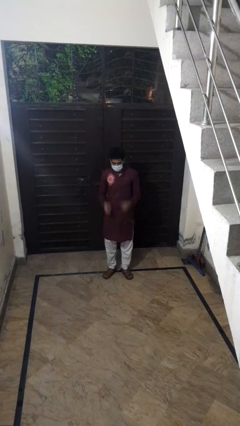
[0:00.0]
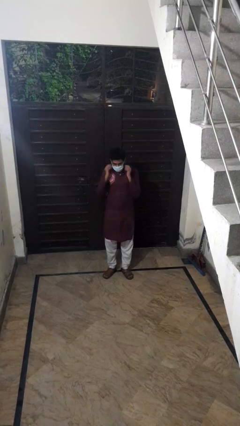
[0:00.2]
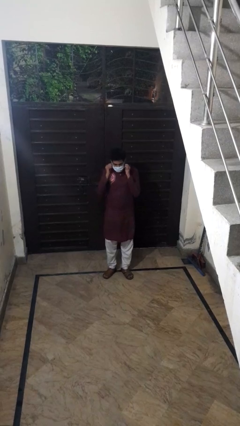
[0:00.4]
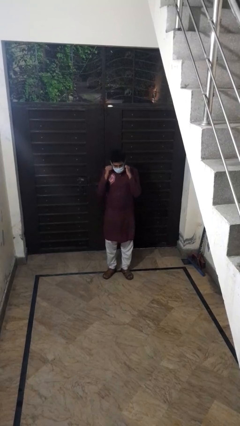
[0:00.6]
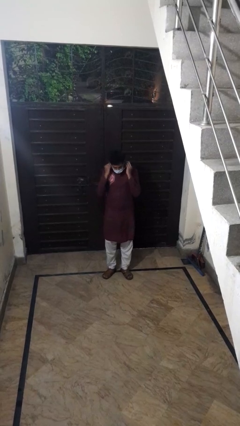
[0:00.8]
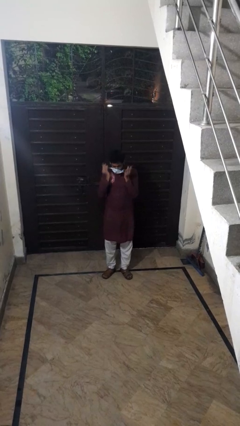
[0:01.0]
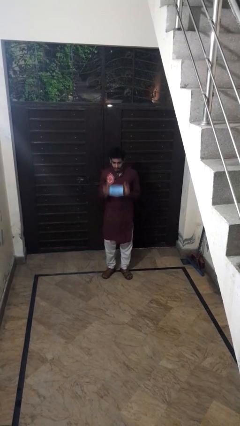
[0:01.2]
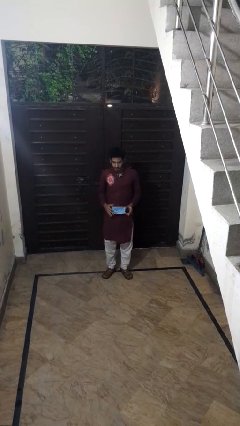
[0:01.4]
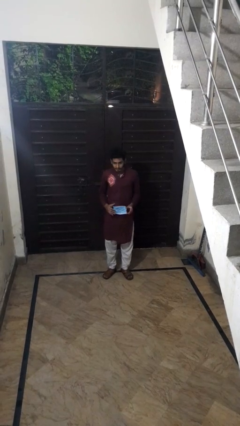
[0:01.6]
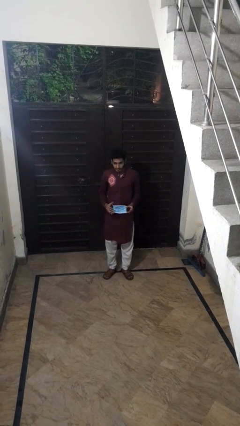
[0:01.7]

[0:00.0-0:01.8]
person takes off facemask

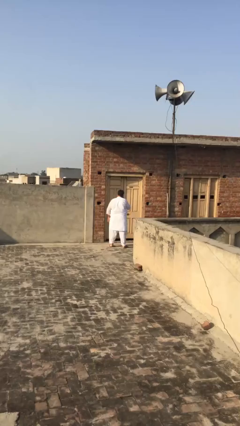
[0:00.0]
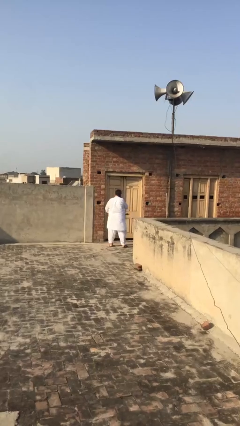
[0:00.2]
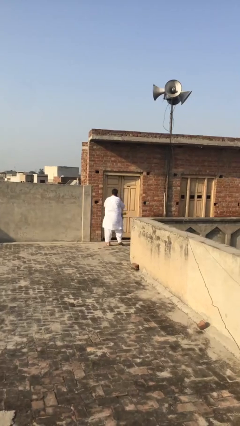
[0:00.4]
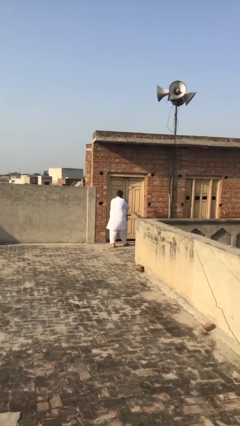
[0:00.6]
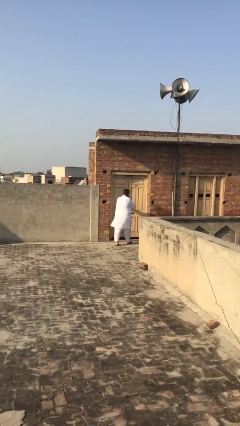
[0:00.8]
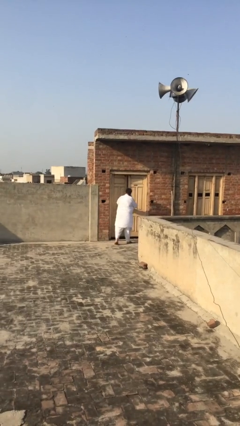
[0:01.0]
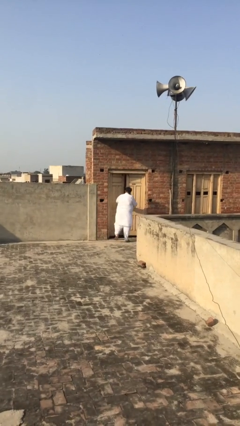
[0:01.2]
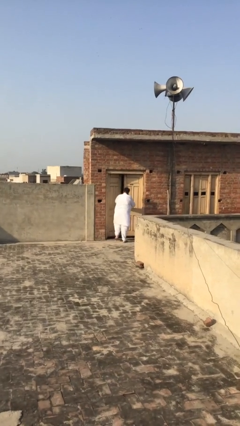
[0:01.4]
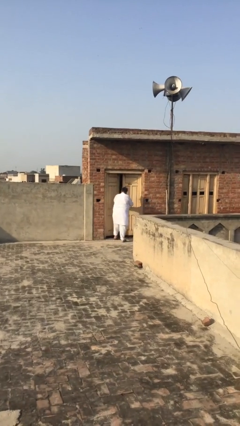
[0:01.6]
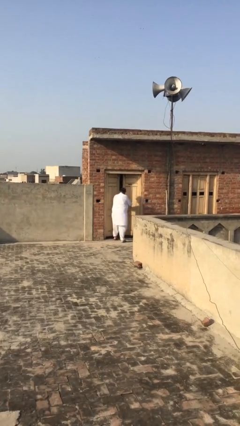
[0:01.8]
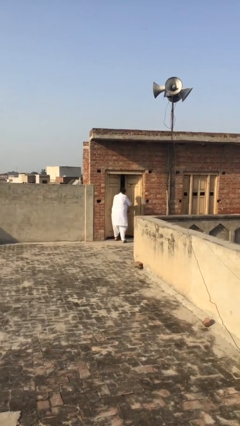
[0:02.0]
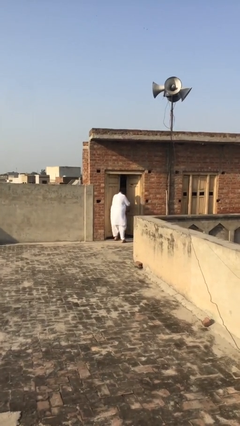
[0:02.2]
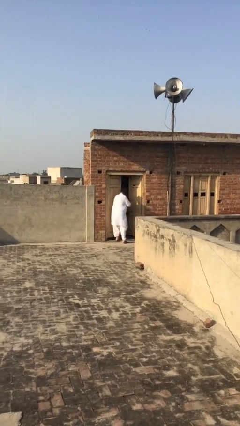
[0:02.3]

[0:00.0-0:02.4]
person opens facility door

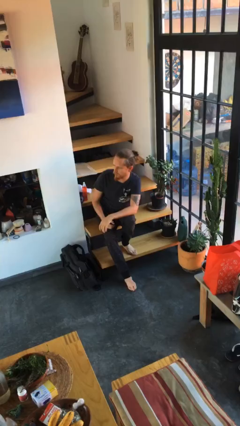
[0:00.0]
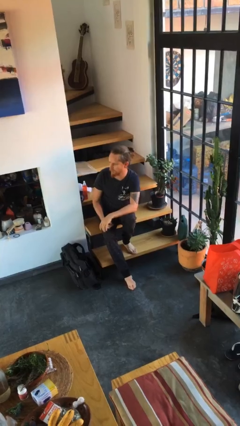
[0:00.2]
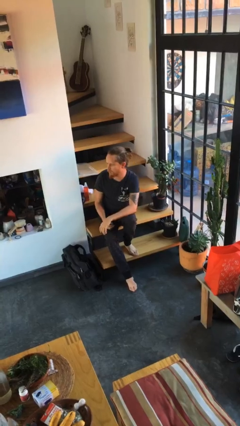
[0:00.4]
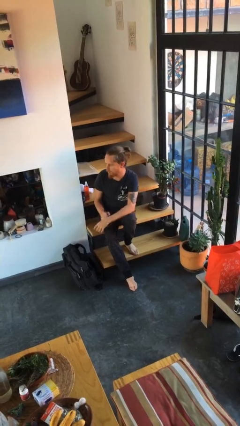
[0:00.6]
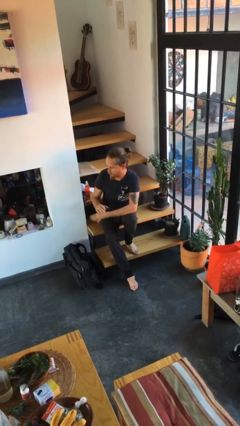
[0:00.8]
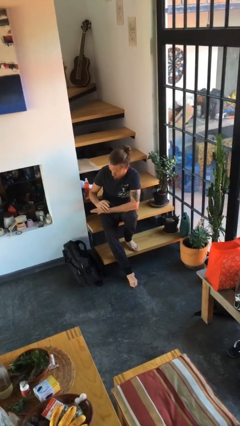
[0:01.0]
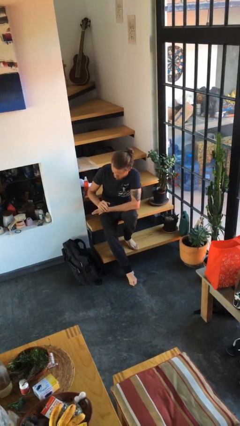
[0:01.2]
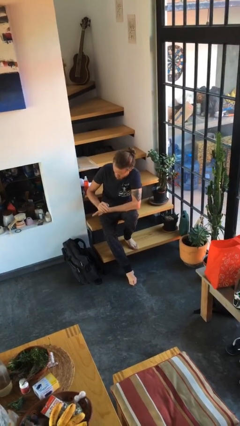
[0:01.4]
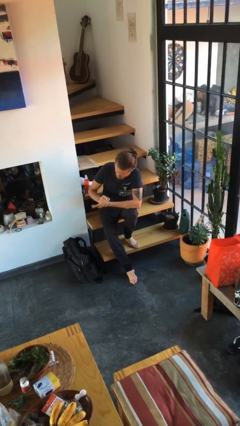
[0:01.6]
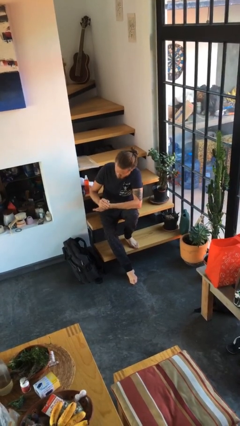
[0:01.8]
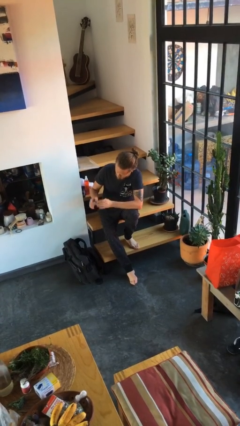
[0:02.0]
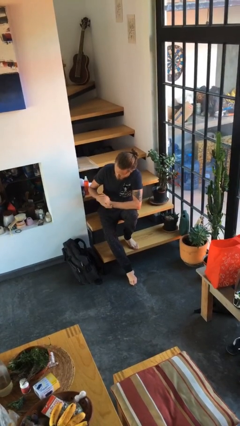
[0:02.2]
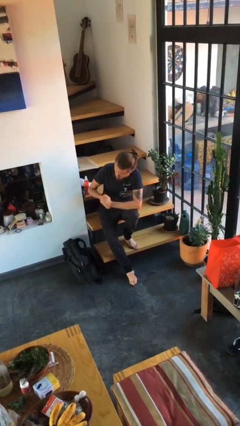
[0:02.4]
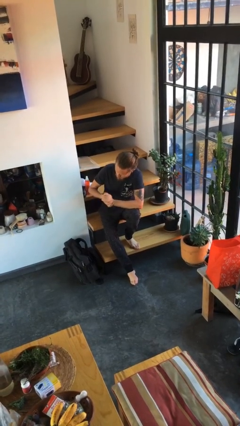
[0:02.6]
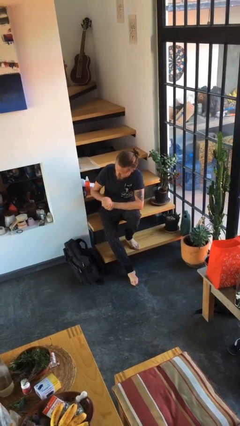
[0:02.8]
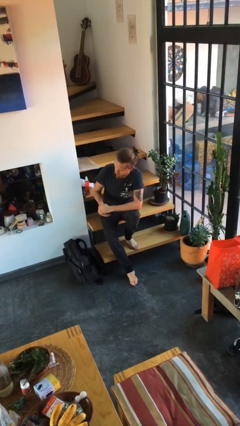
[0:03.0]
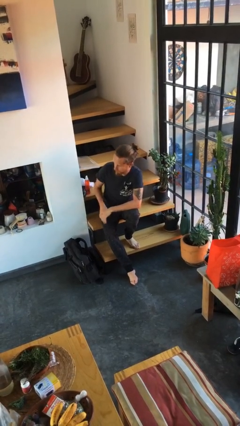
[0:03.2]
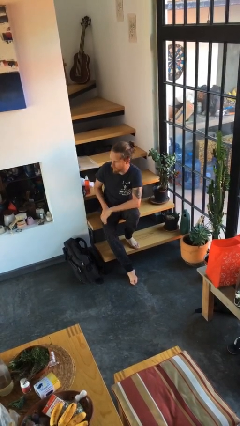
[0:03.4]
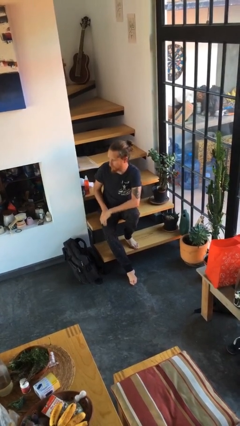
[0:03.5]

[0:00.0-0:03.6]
person cracks knuckles

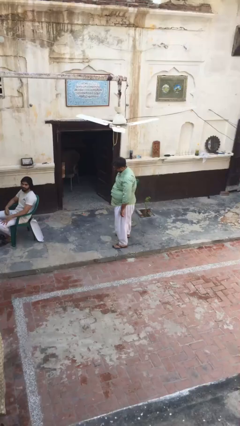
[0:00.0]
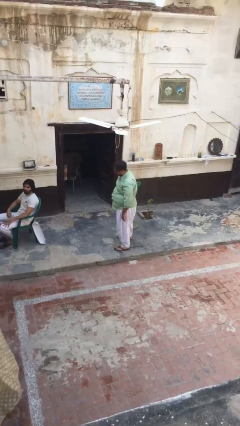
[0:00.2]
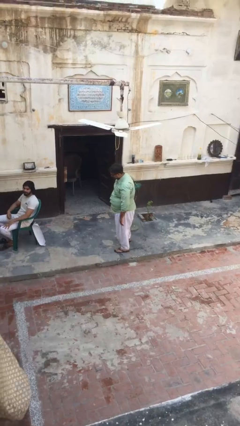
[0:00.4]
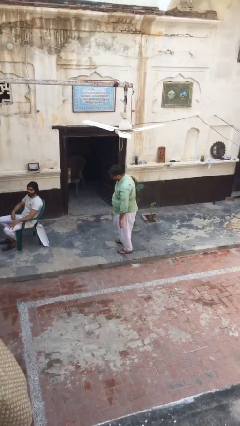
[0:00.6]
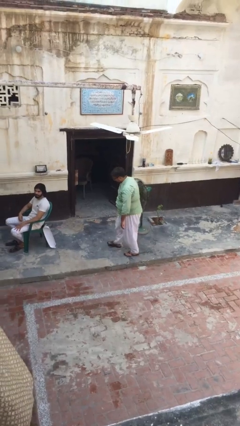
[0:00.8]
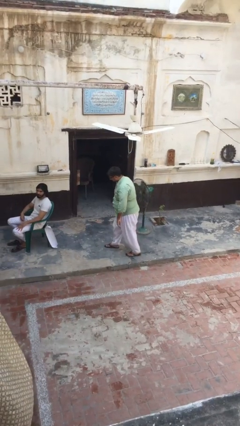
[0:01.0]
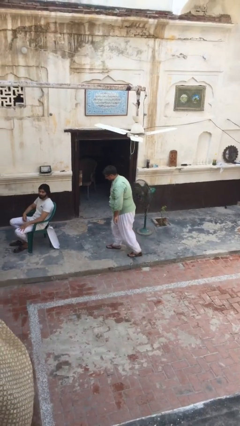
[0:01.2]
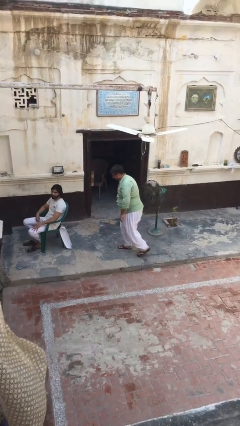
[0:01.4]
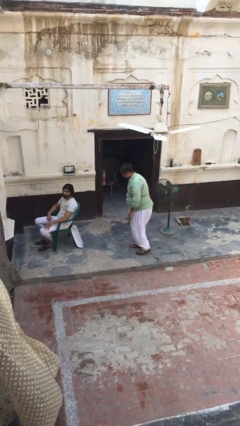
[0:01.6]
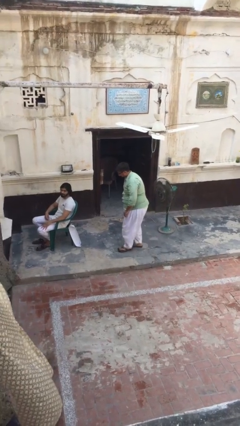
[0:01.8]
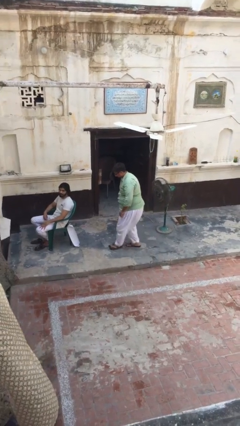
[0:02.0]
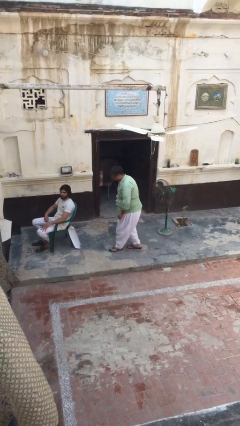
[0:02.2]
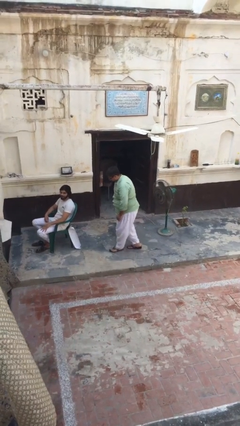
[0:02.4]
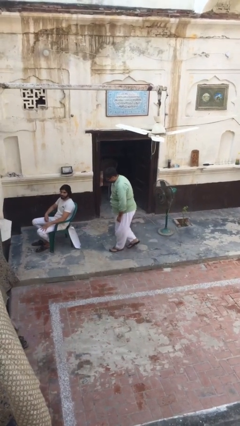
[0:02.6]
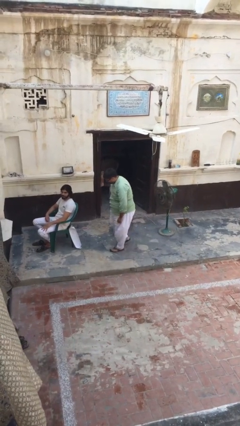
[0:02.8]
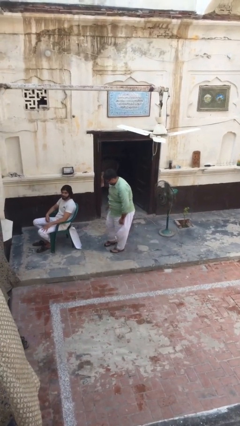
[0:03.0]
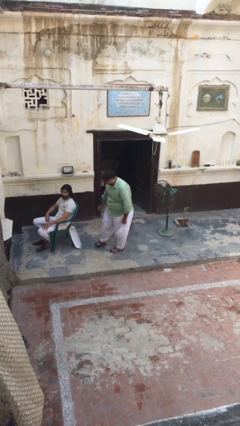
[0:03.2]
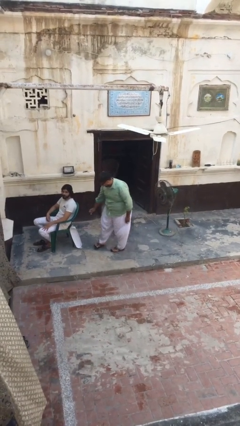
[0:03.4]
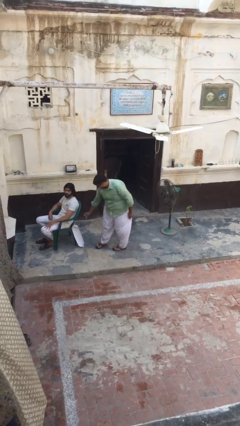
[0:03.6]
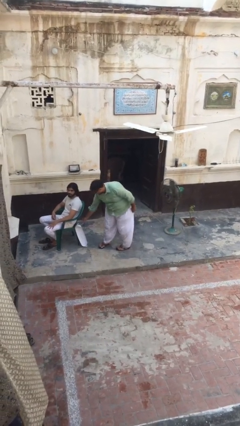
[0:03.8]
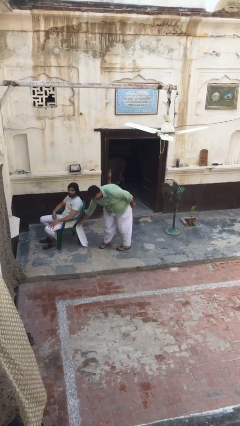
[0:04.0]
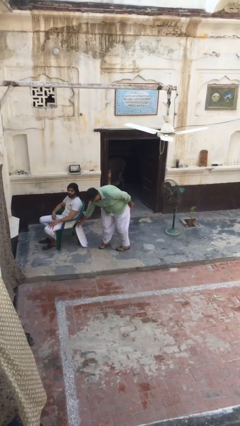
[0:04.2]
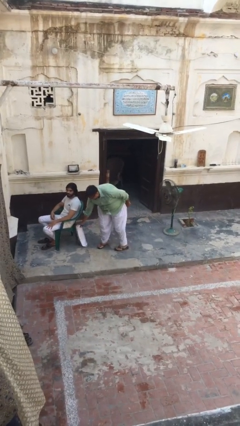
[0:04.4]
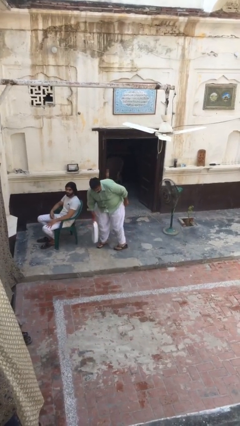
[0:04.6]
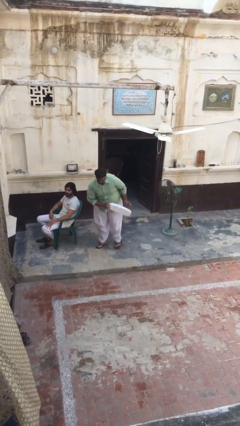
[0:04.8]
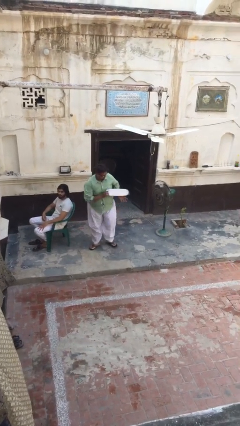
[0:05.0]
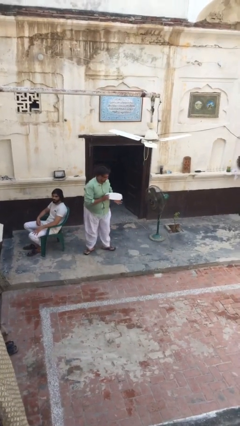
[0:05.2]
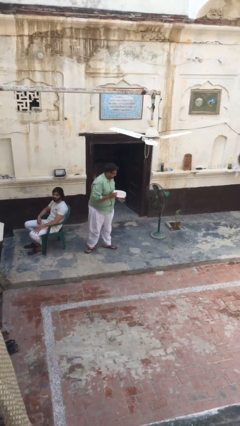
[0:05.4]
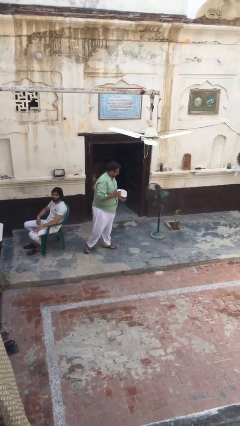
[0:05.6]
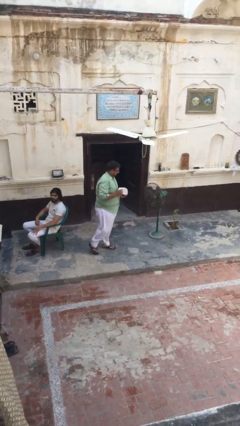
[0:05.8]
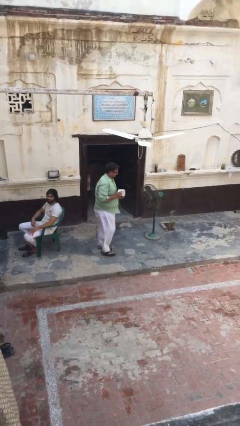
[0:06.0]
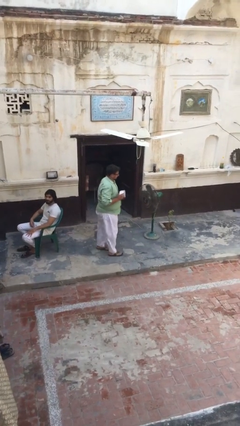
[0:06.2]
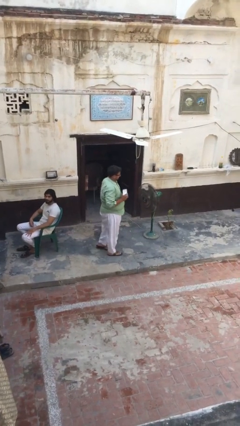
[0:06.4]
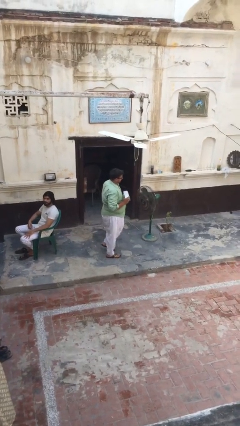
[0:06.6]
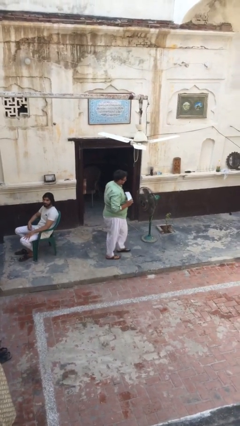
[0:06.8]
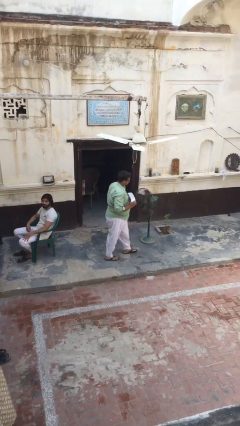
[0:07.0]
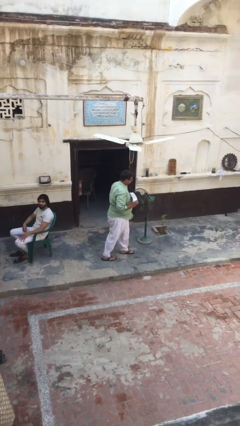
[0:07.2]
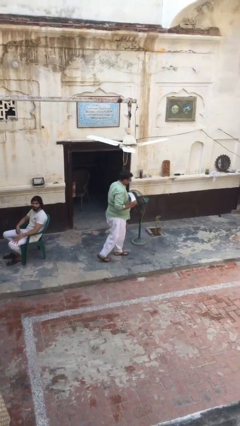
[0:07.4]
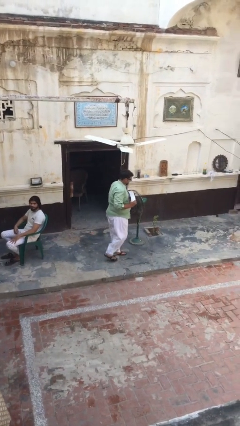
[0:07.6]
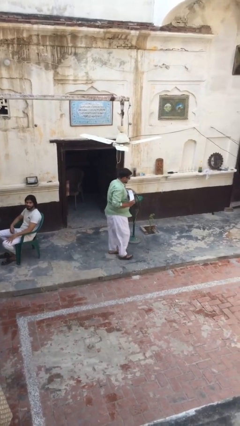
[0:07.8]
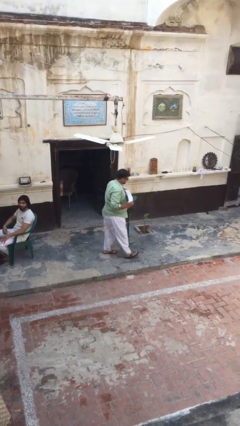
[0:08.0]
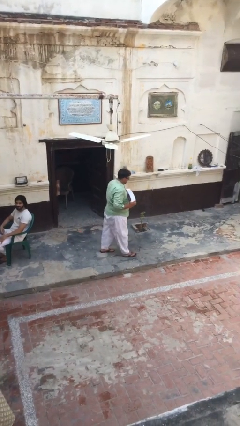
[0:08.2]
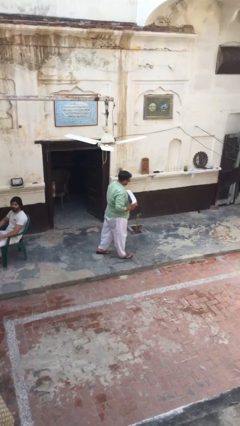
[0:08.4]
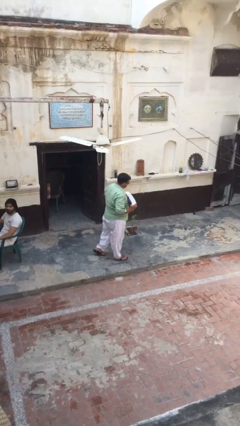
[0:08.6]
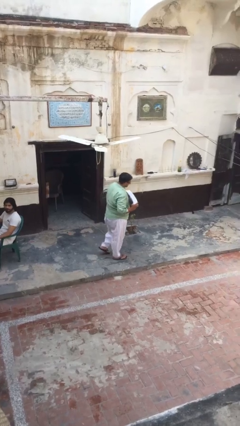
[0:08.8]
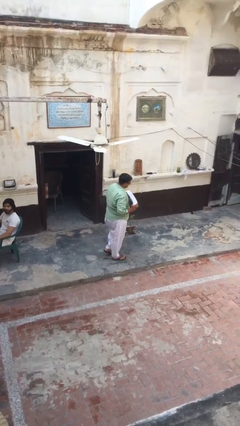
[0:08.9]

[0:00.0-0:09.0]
person steals object from person

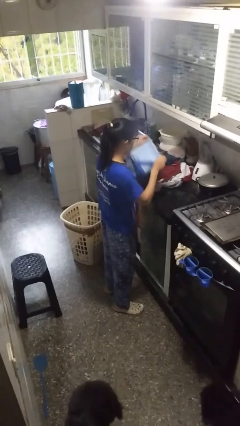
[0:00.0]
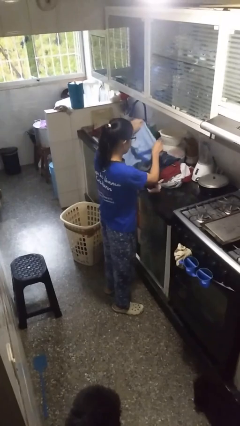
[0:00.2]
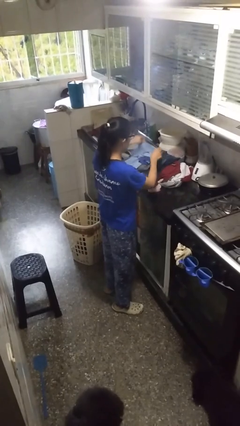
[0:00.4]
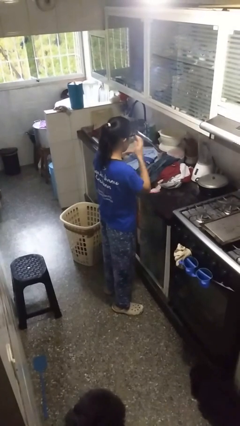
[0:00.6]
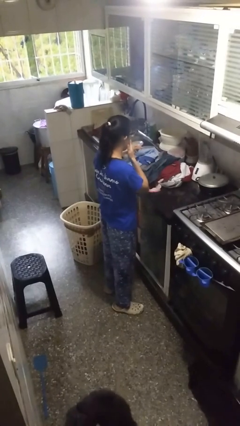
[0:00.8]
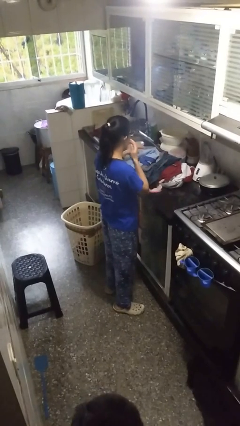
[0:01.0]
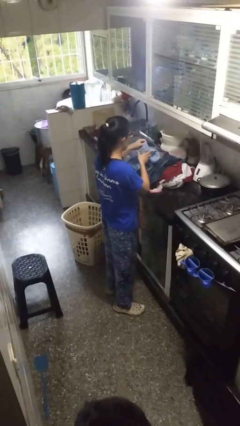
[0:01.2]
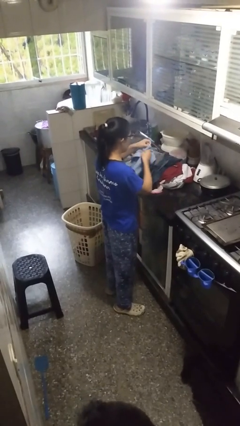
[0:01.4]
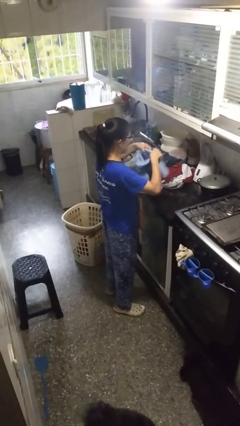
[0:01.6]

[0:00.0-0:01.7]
person folds shirt
